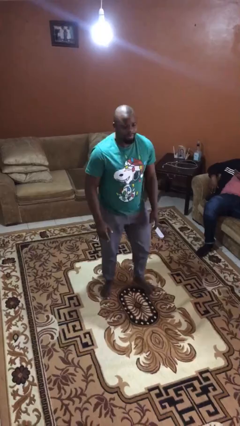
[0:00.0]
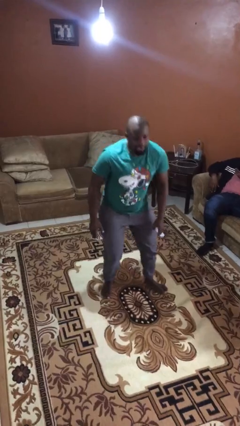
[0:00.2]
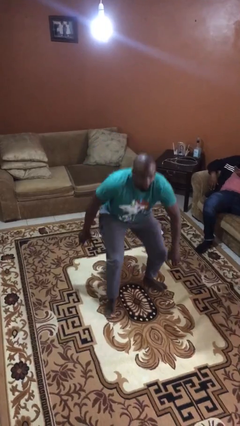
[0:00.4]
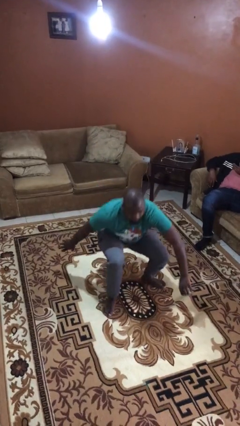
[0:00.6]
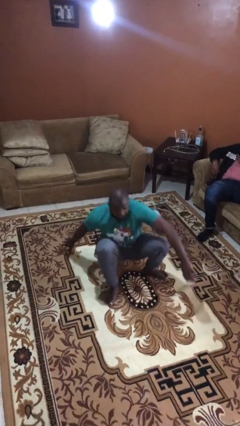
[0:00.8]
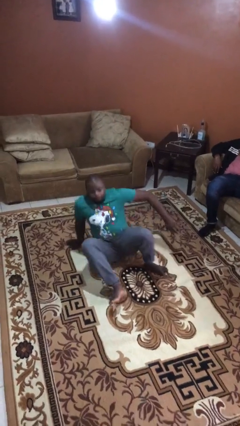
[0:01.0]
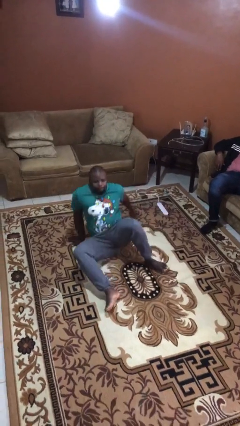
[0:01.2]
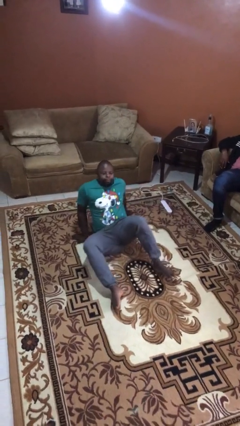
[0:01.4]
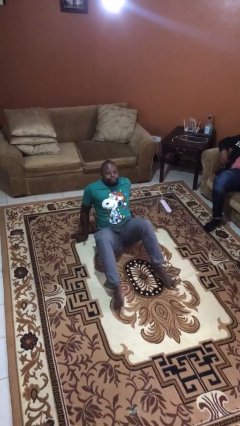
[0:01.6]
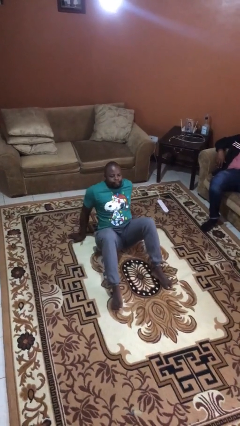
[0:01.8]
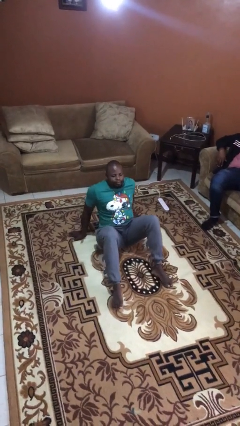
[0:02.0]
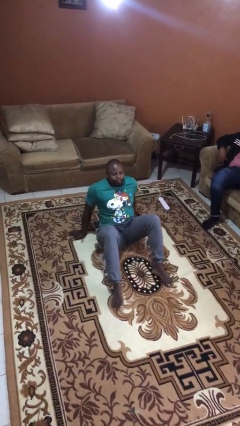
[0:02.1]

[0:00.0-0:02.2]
person sits down

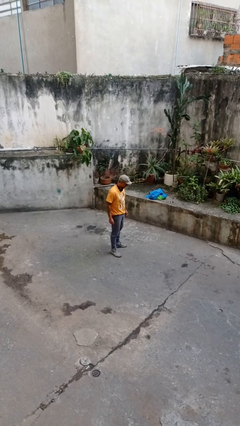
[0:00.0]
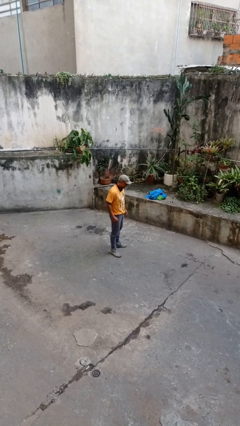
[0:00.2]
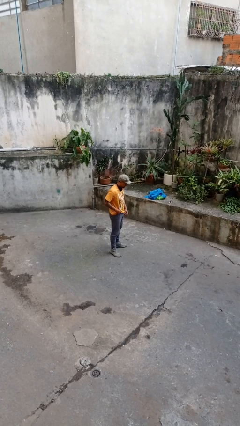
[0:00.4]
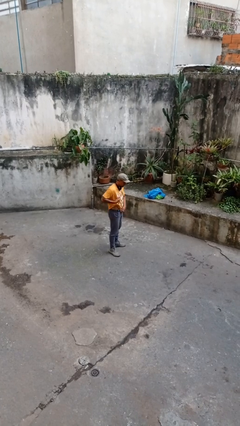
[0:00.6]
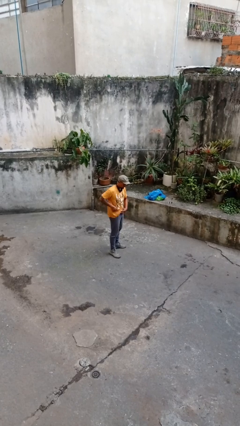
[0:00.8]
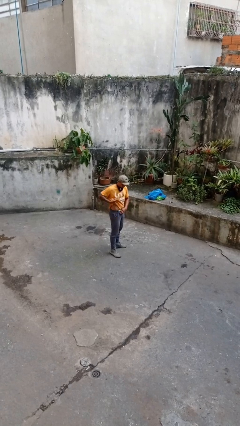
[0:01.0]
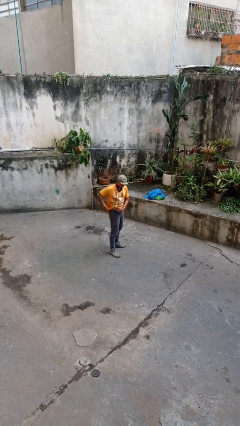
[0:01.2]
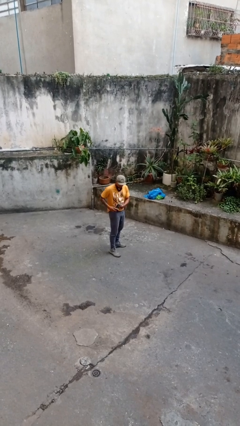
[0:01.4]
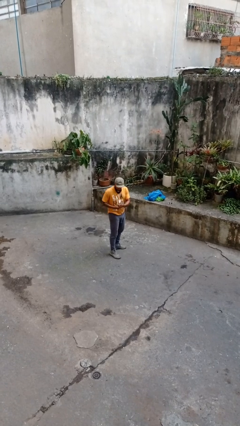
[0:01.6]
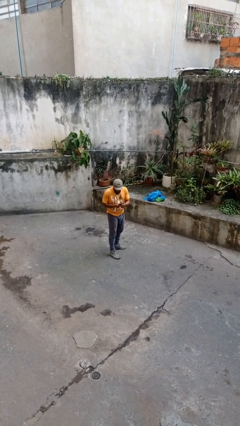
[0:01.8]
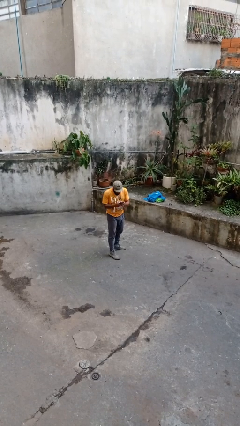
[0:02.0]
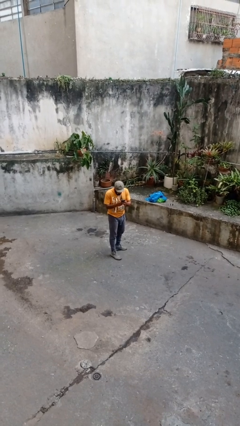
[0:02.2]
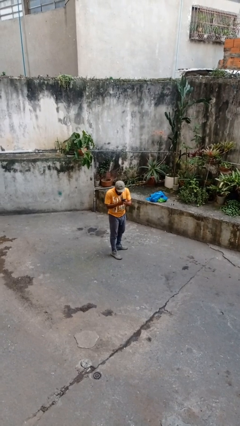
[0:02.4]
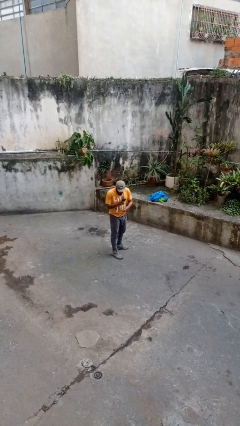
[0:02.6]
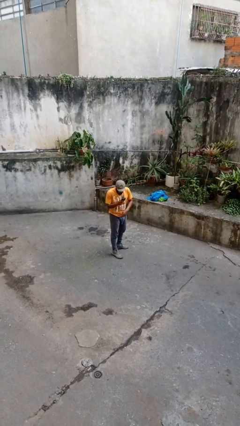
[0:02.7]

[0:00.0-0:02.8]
person takes phone from pocket

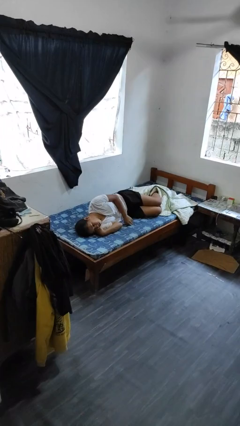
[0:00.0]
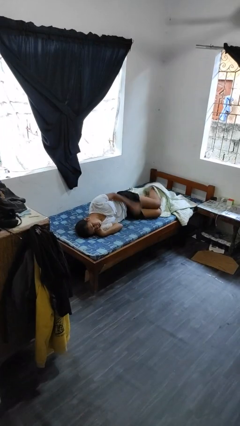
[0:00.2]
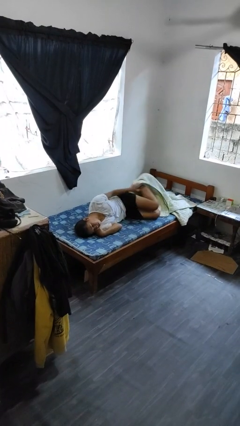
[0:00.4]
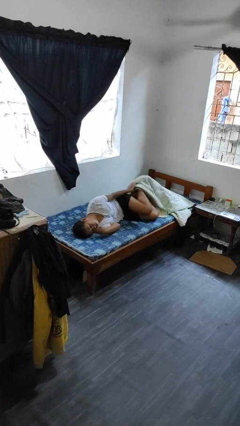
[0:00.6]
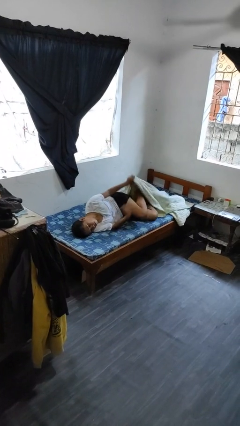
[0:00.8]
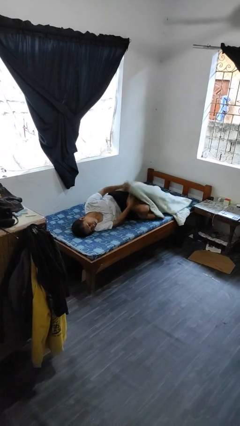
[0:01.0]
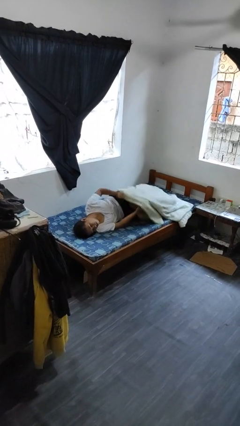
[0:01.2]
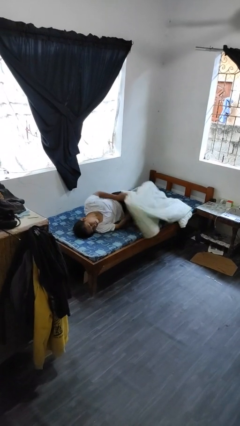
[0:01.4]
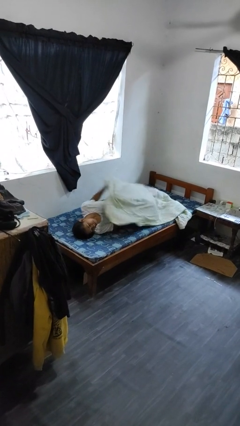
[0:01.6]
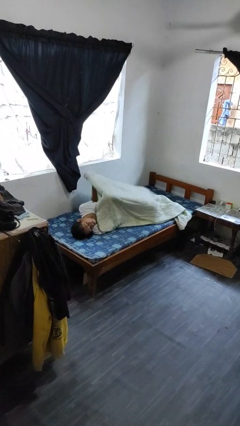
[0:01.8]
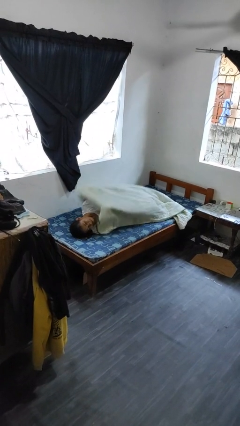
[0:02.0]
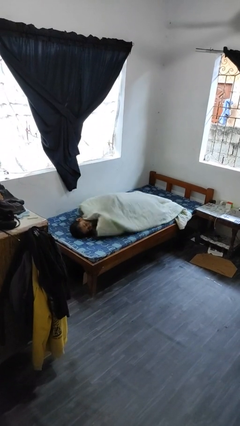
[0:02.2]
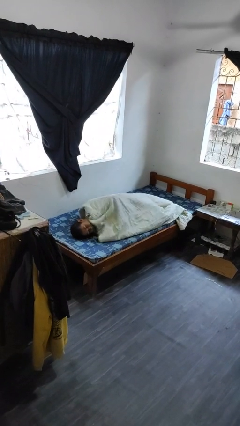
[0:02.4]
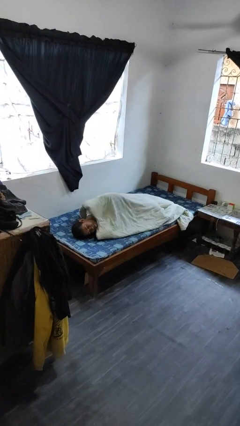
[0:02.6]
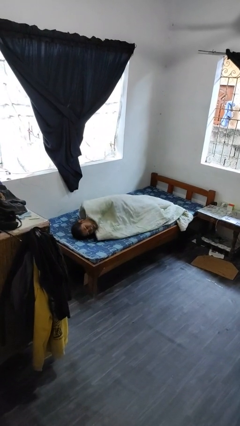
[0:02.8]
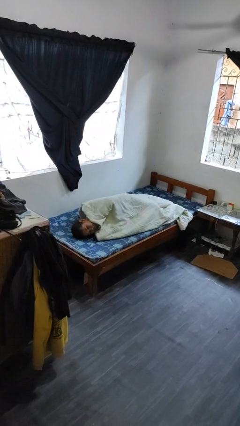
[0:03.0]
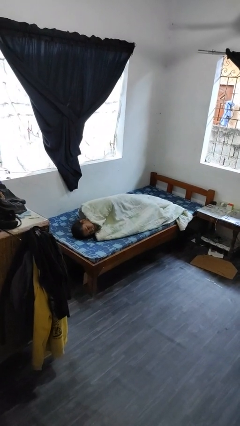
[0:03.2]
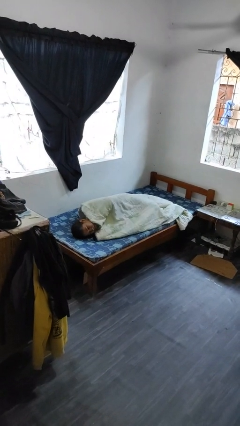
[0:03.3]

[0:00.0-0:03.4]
person covers with bedsheets

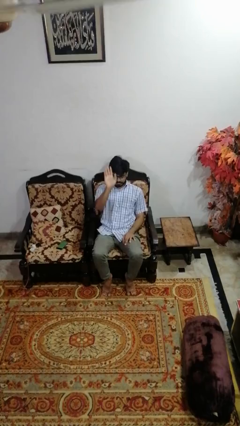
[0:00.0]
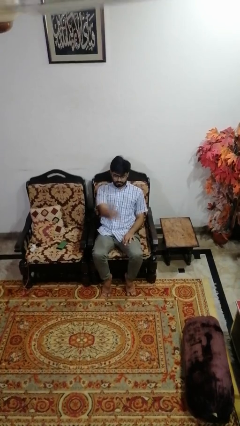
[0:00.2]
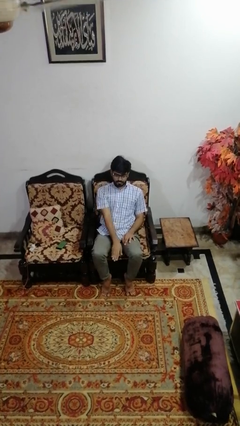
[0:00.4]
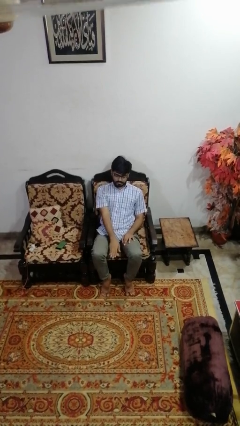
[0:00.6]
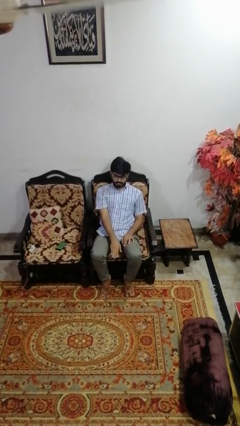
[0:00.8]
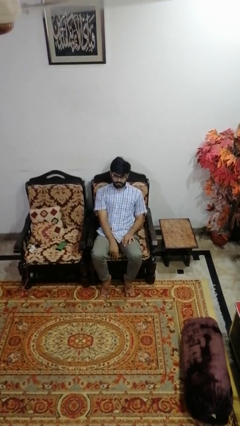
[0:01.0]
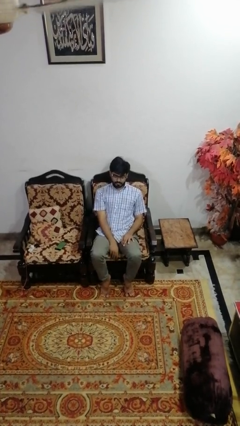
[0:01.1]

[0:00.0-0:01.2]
person gestures swipe down

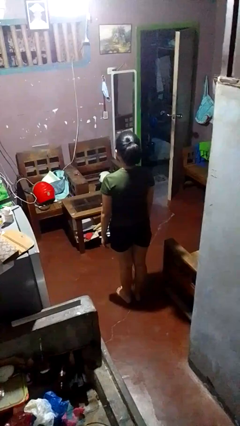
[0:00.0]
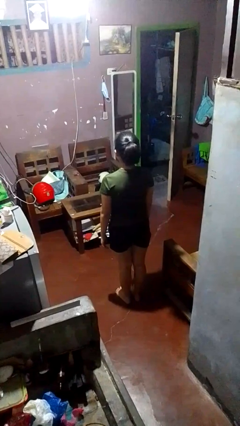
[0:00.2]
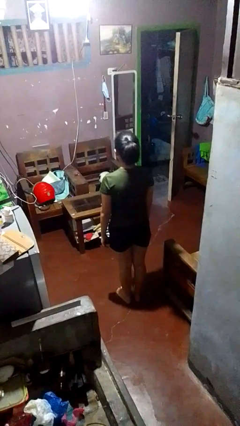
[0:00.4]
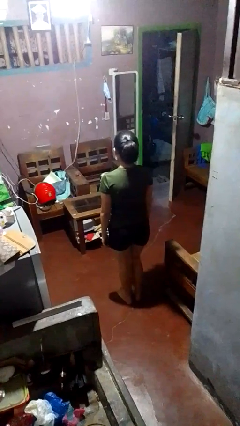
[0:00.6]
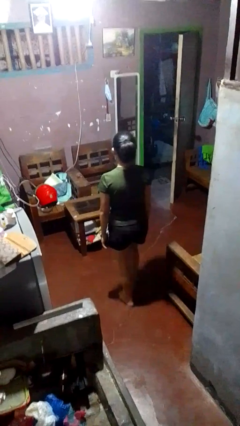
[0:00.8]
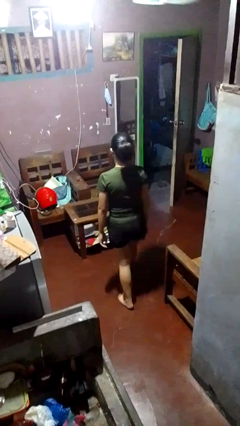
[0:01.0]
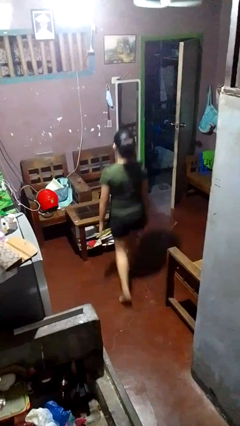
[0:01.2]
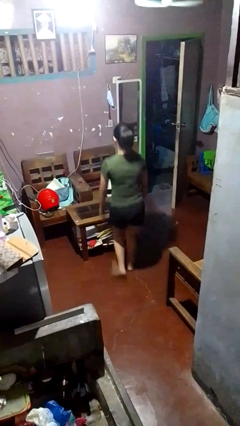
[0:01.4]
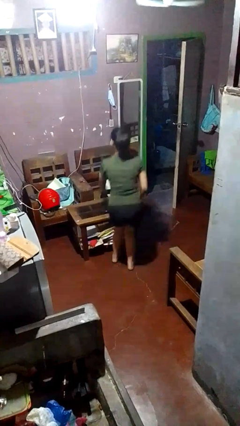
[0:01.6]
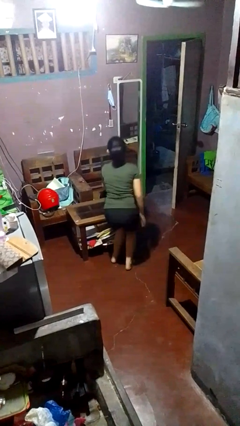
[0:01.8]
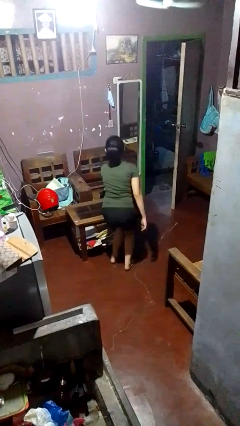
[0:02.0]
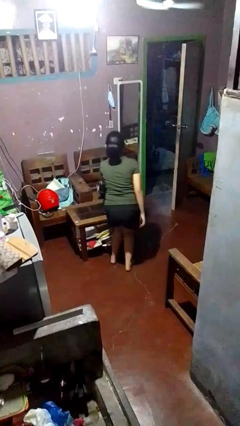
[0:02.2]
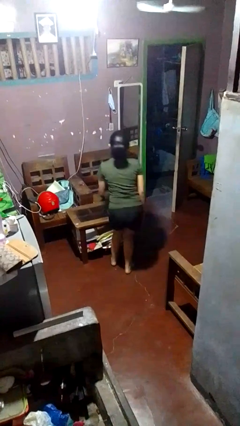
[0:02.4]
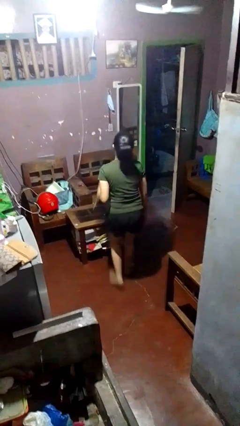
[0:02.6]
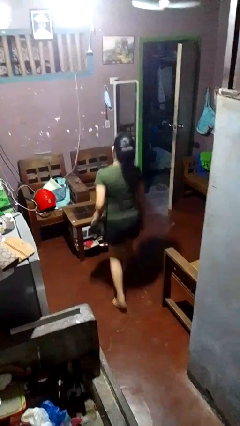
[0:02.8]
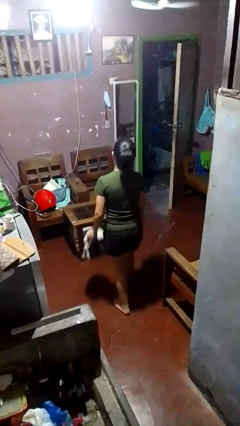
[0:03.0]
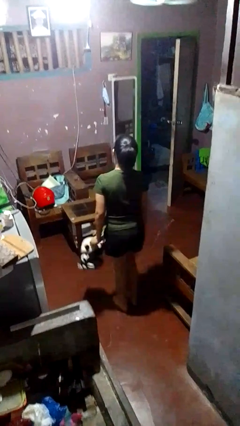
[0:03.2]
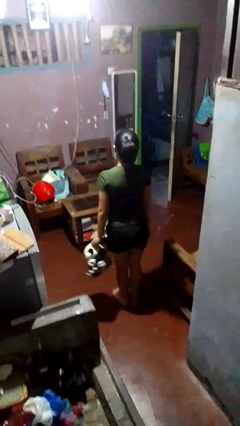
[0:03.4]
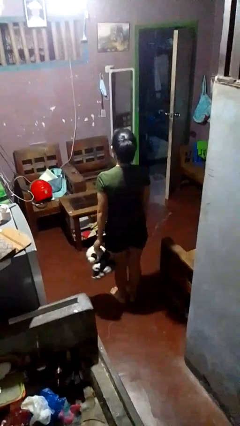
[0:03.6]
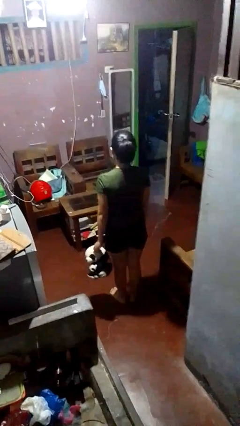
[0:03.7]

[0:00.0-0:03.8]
person picks up object from table

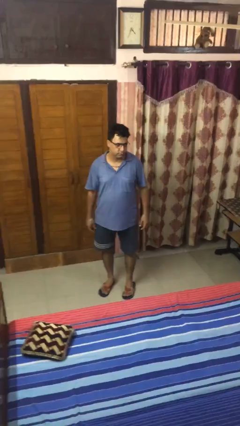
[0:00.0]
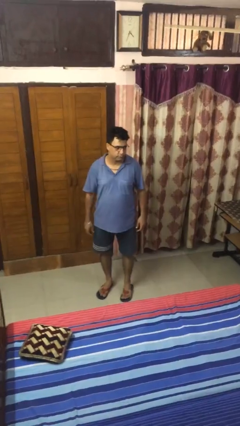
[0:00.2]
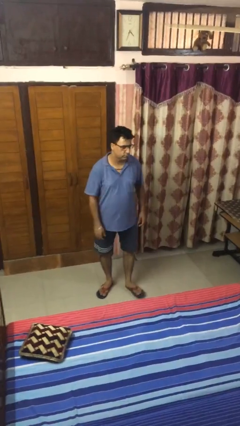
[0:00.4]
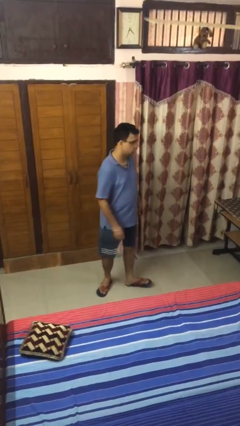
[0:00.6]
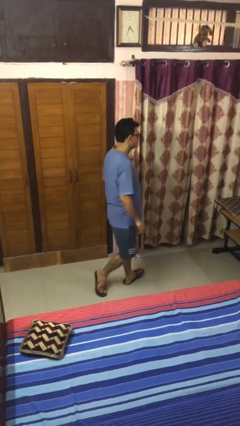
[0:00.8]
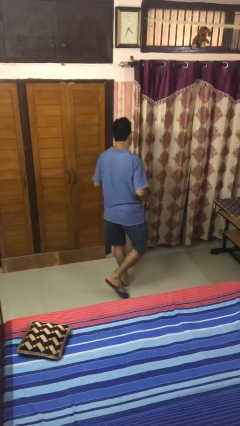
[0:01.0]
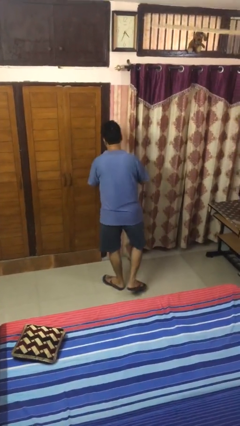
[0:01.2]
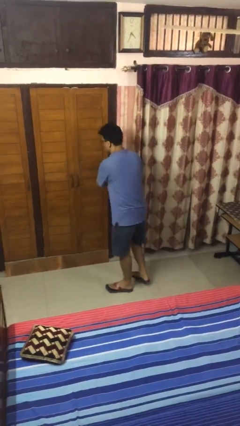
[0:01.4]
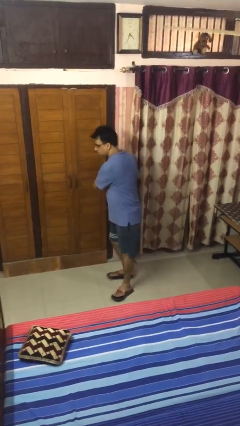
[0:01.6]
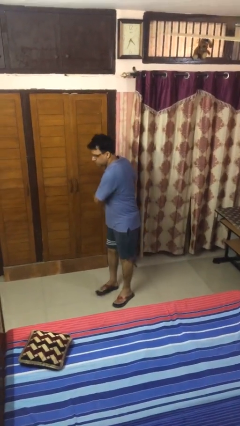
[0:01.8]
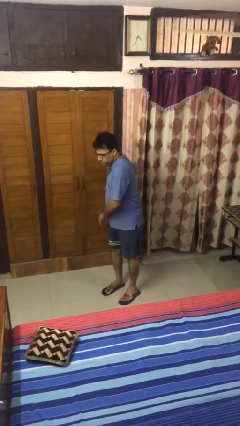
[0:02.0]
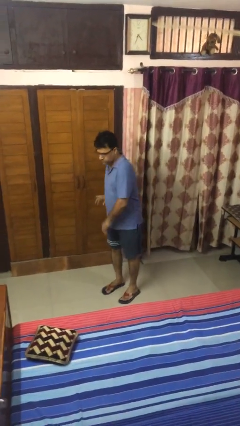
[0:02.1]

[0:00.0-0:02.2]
person twirls

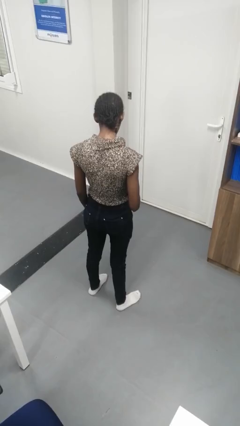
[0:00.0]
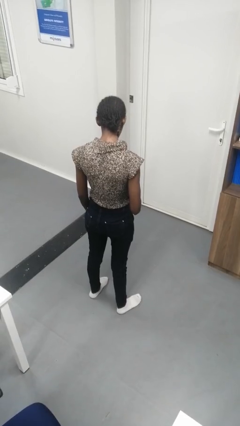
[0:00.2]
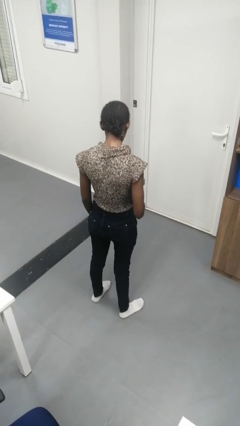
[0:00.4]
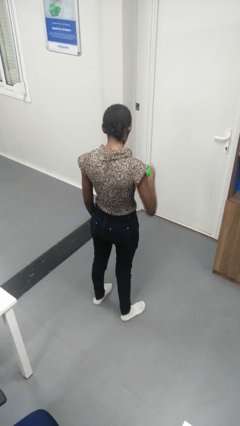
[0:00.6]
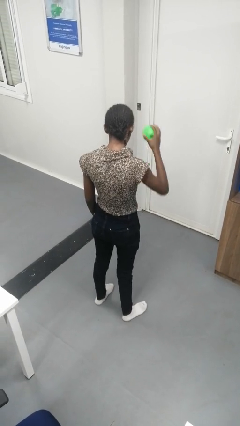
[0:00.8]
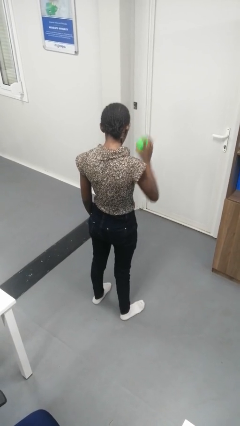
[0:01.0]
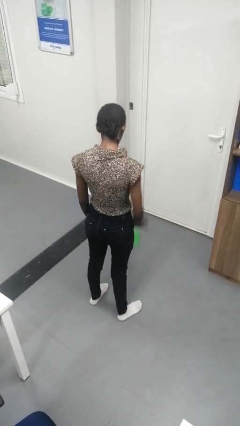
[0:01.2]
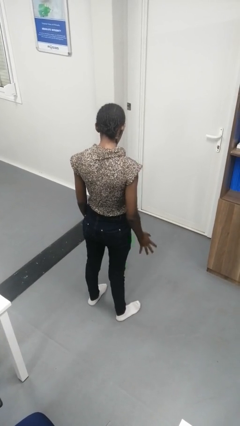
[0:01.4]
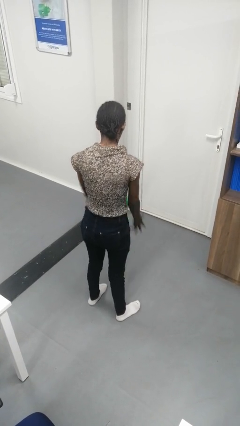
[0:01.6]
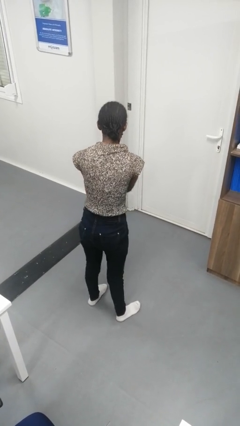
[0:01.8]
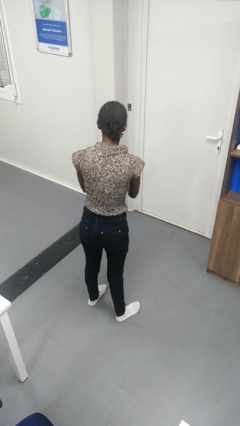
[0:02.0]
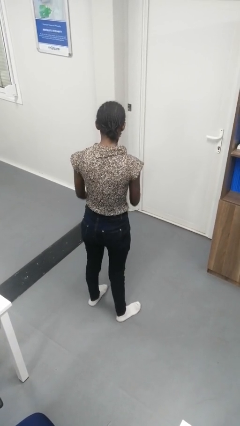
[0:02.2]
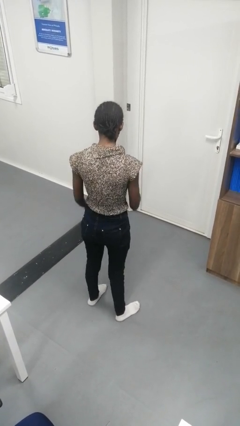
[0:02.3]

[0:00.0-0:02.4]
person bounces ball on floor
